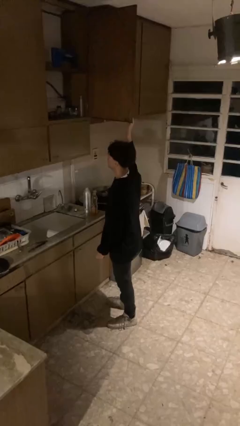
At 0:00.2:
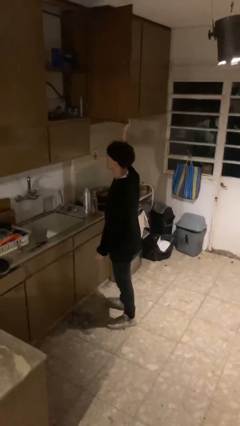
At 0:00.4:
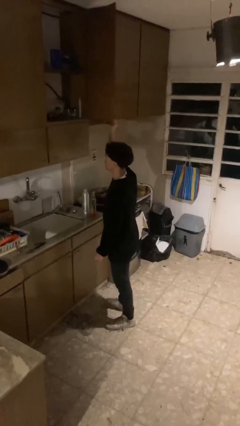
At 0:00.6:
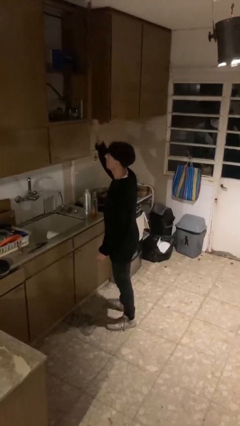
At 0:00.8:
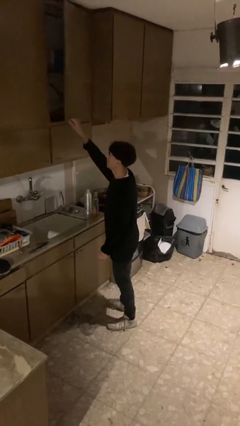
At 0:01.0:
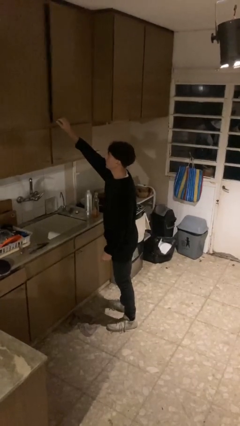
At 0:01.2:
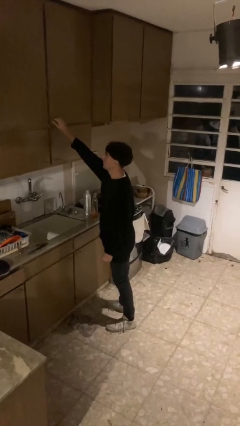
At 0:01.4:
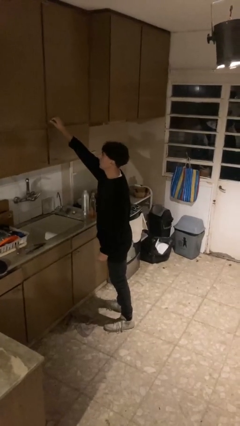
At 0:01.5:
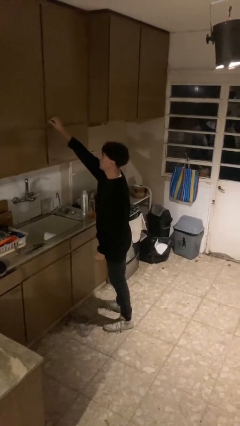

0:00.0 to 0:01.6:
person closes cabinet

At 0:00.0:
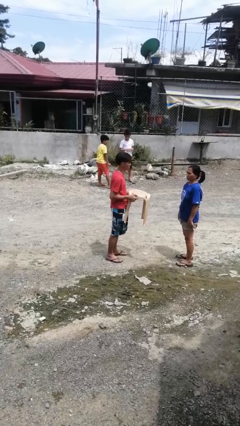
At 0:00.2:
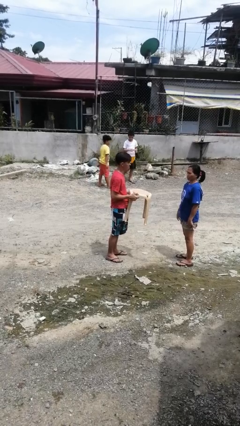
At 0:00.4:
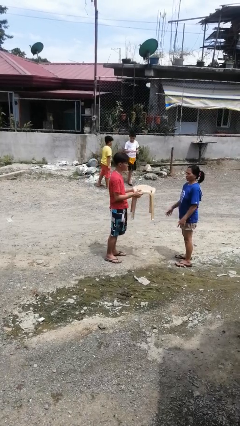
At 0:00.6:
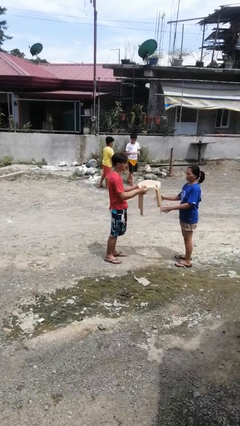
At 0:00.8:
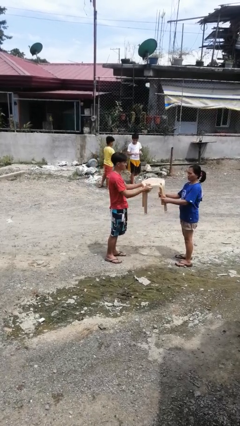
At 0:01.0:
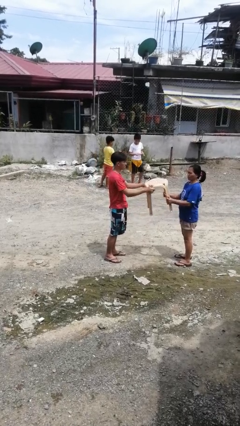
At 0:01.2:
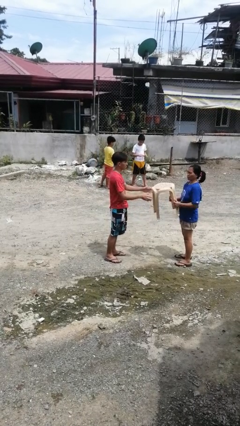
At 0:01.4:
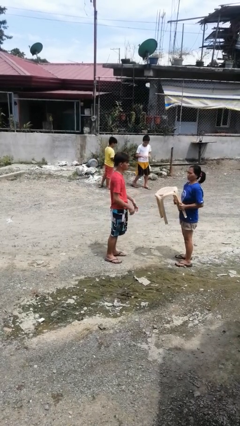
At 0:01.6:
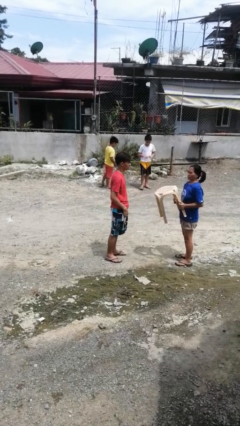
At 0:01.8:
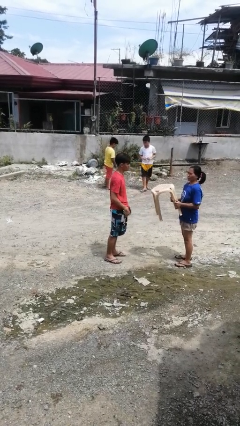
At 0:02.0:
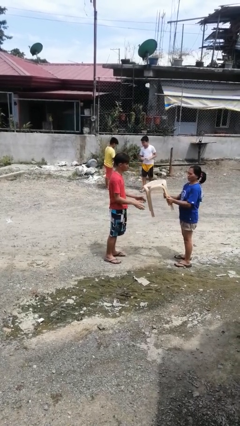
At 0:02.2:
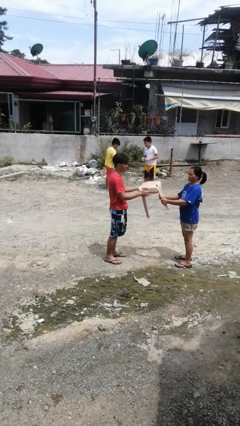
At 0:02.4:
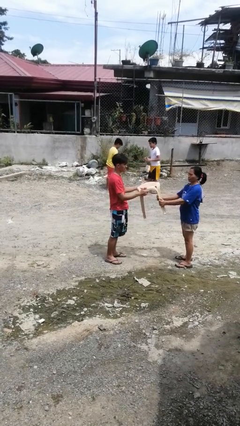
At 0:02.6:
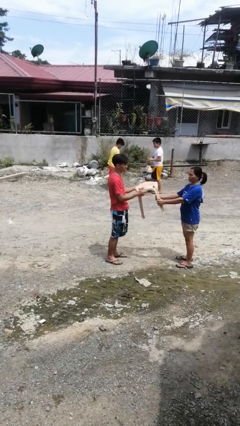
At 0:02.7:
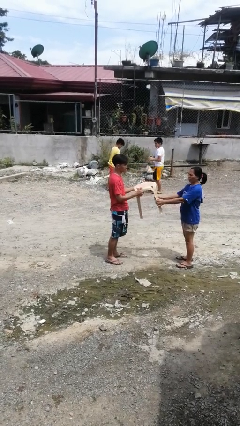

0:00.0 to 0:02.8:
person transfers object to person

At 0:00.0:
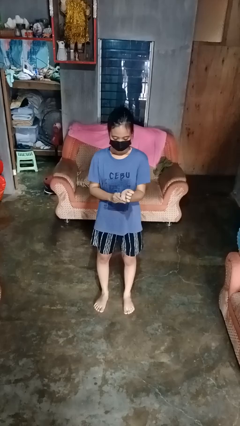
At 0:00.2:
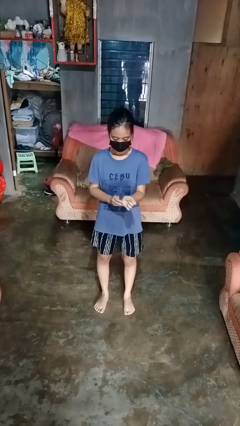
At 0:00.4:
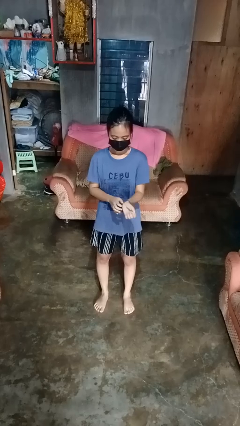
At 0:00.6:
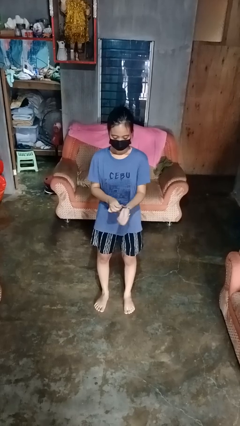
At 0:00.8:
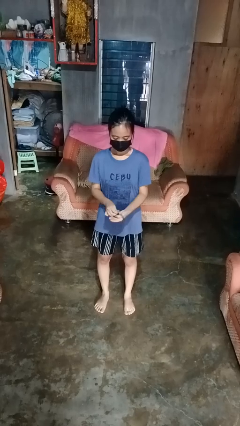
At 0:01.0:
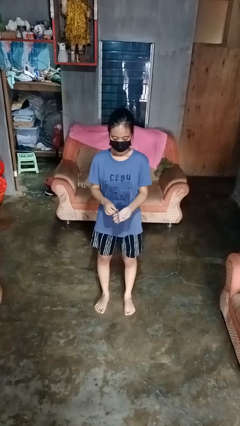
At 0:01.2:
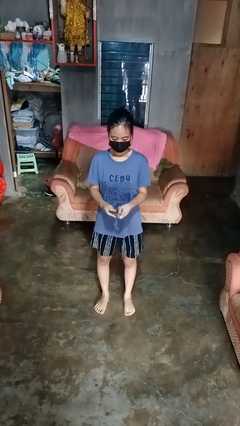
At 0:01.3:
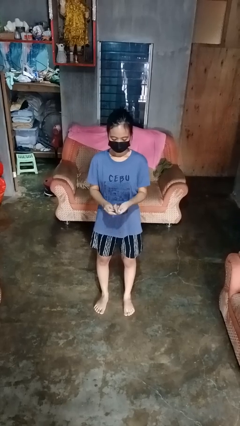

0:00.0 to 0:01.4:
person takes off wristwatch

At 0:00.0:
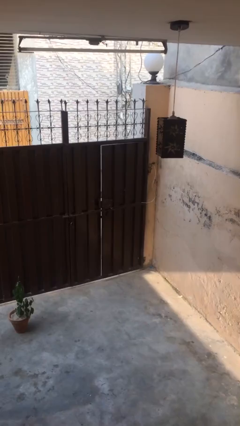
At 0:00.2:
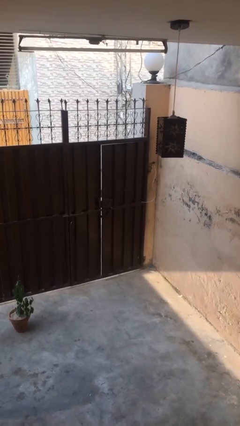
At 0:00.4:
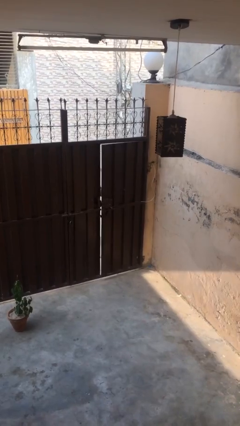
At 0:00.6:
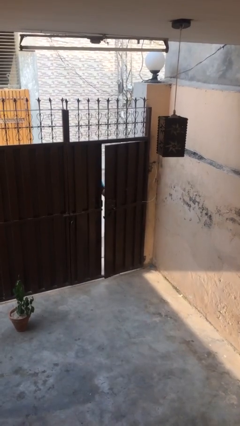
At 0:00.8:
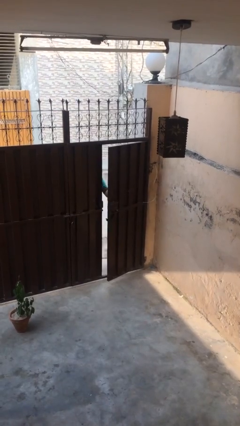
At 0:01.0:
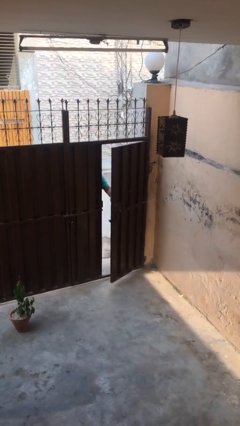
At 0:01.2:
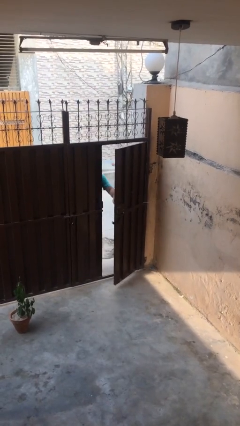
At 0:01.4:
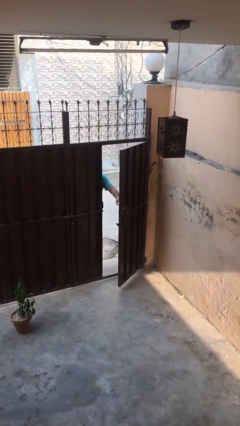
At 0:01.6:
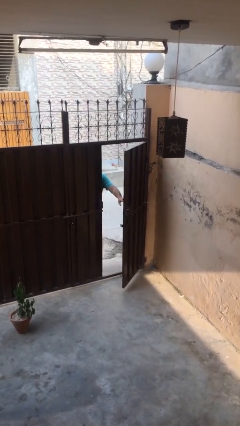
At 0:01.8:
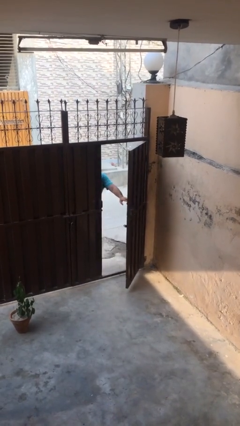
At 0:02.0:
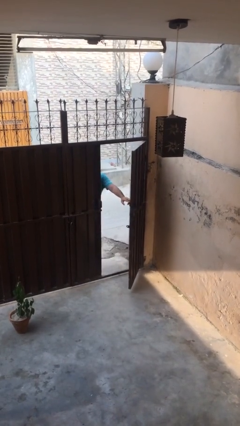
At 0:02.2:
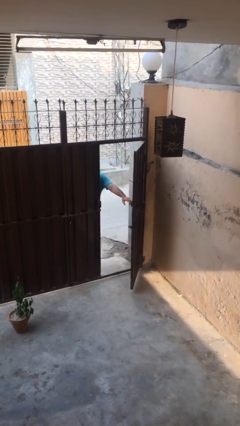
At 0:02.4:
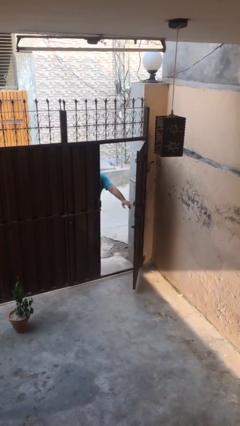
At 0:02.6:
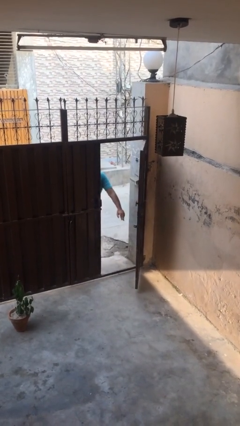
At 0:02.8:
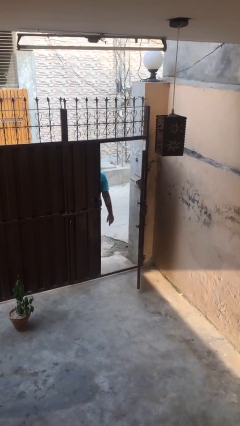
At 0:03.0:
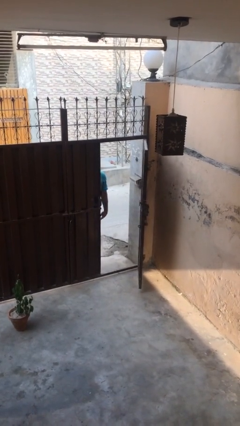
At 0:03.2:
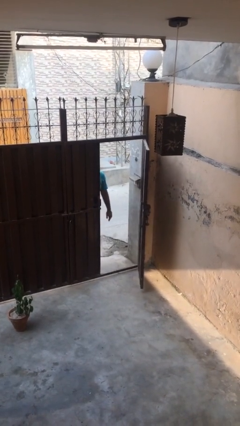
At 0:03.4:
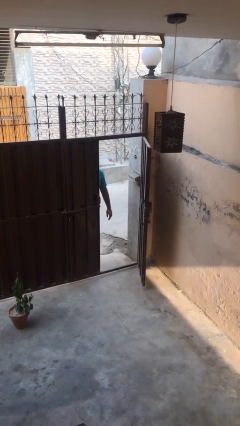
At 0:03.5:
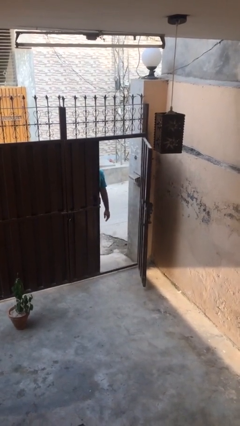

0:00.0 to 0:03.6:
person opens facility door

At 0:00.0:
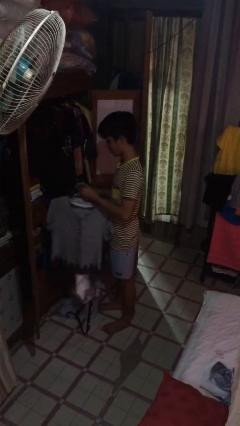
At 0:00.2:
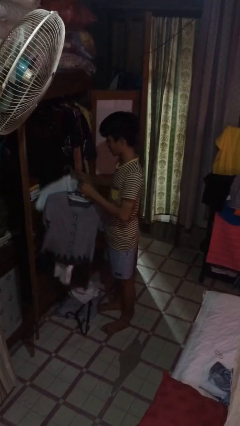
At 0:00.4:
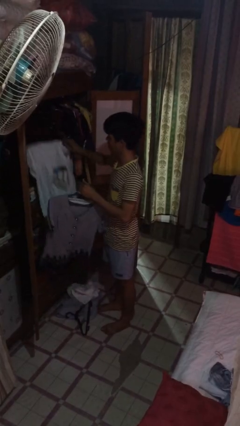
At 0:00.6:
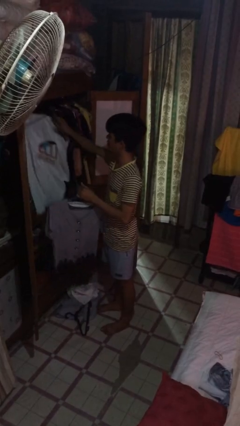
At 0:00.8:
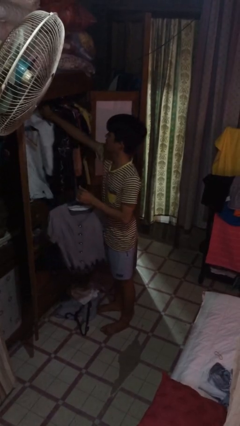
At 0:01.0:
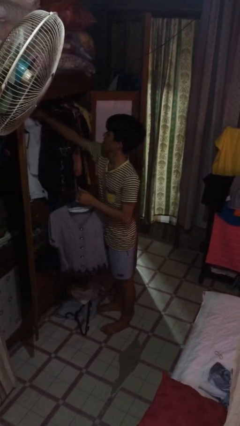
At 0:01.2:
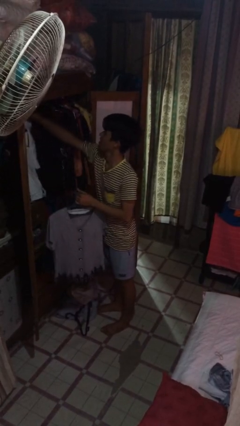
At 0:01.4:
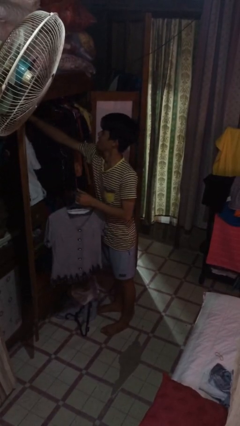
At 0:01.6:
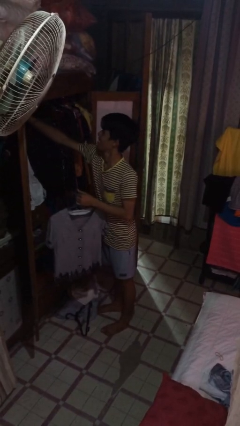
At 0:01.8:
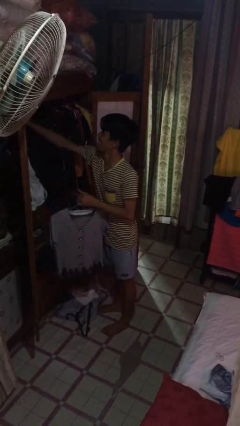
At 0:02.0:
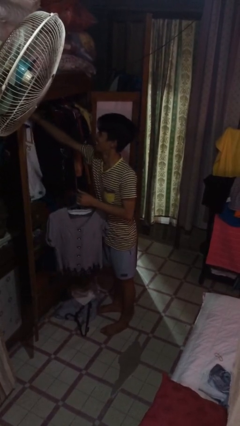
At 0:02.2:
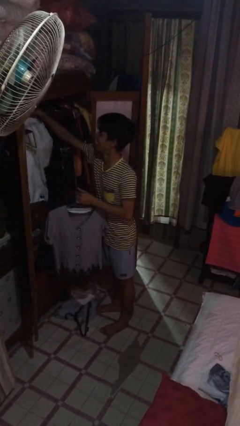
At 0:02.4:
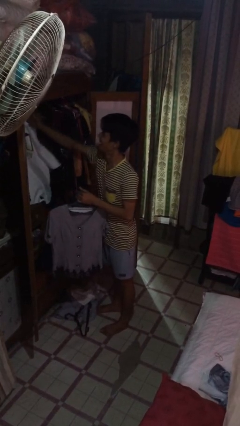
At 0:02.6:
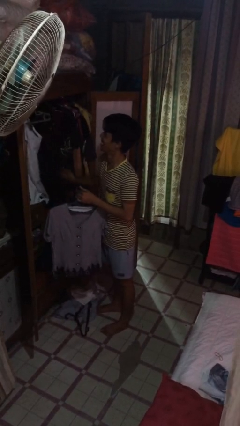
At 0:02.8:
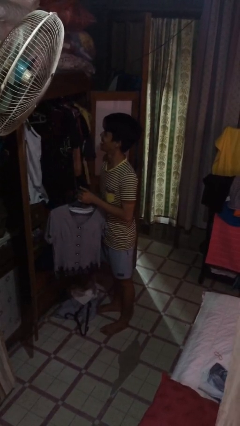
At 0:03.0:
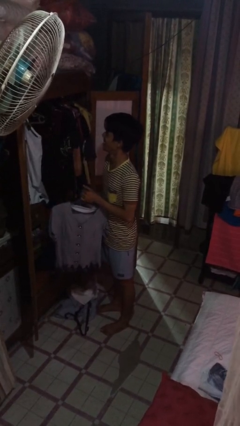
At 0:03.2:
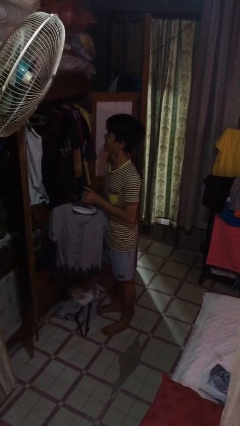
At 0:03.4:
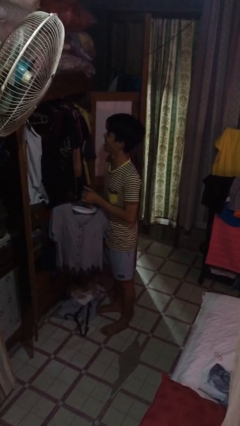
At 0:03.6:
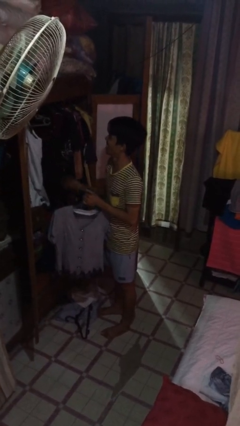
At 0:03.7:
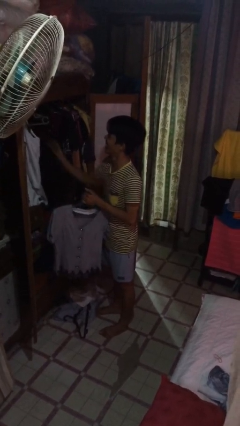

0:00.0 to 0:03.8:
person puts clothes into closet

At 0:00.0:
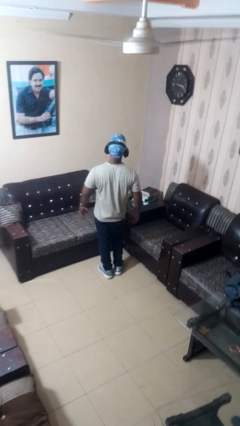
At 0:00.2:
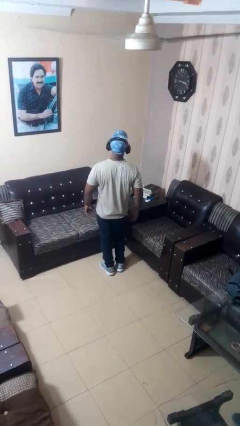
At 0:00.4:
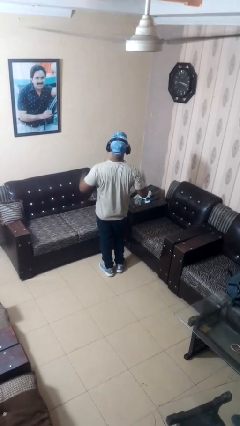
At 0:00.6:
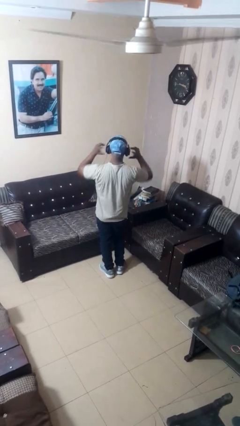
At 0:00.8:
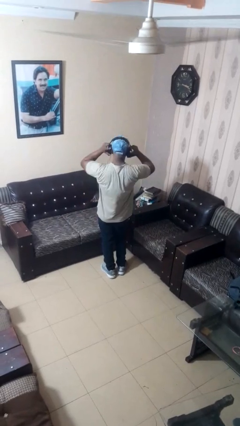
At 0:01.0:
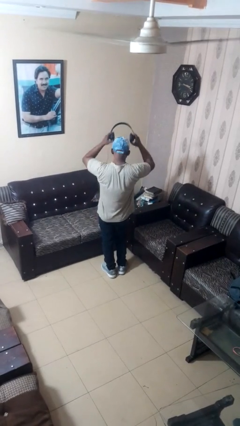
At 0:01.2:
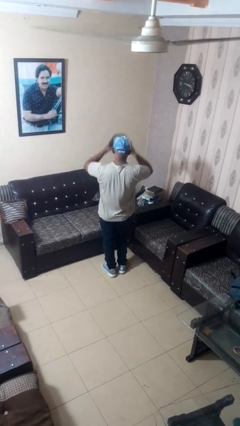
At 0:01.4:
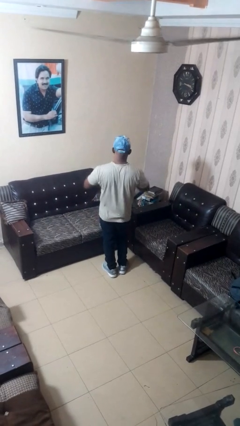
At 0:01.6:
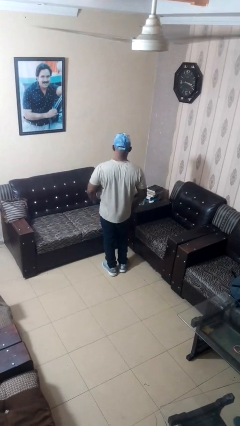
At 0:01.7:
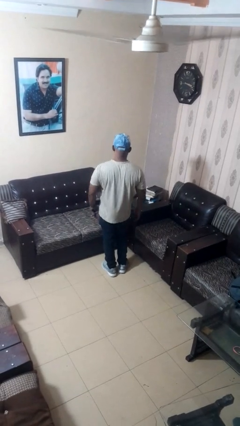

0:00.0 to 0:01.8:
person takes off headphones

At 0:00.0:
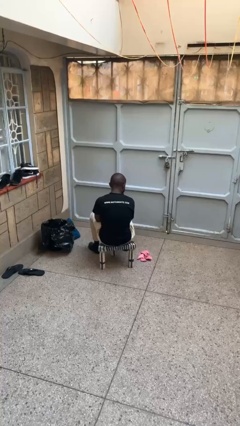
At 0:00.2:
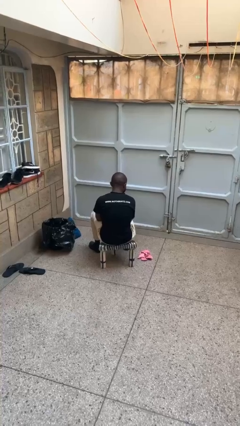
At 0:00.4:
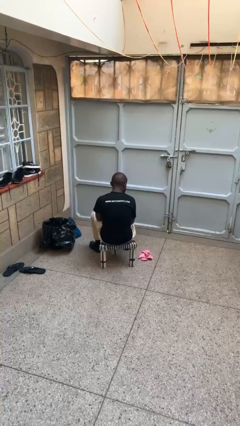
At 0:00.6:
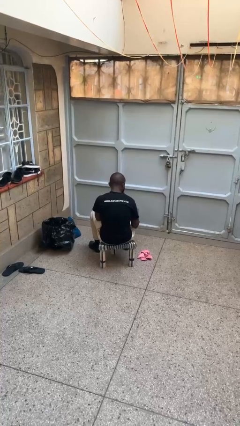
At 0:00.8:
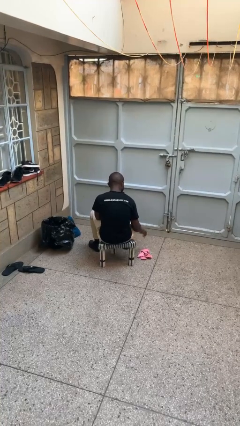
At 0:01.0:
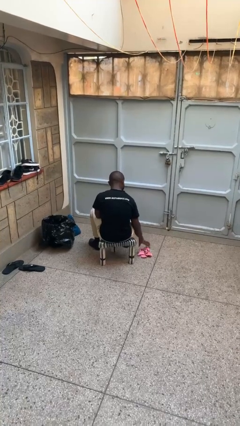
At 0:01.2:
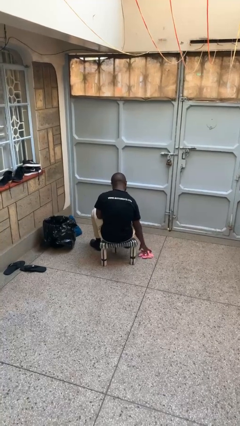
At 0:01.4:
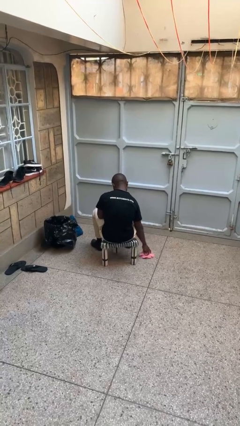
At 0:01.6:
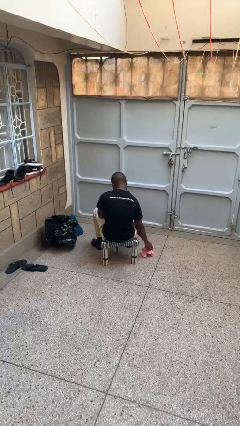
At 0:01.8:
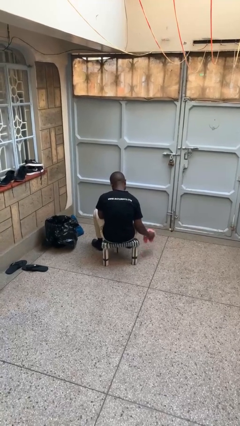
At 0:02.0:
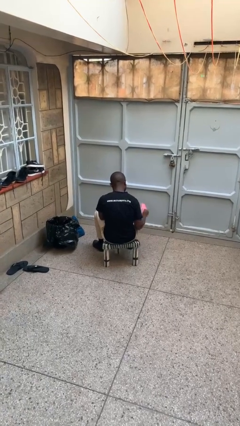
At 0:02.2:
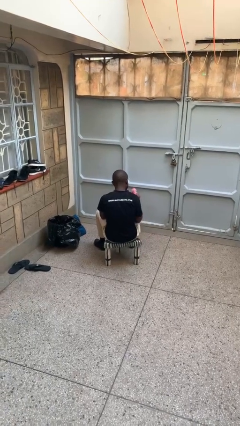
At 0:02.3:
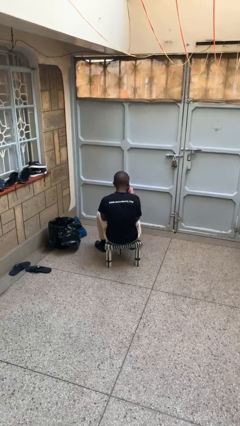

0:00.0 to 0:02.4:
person picks up object from table
